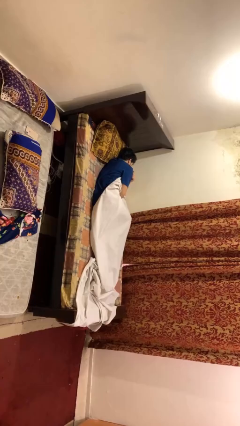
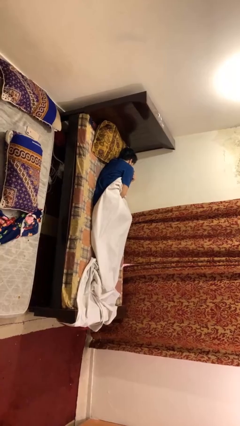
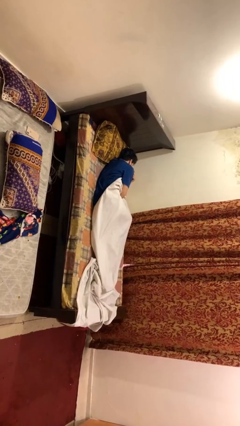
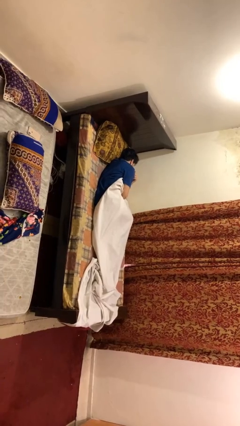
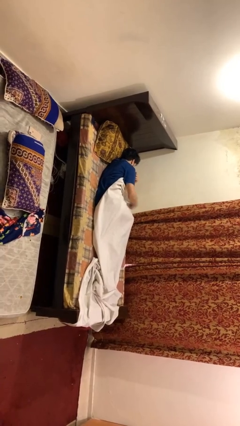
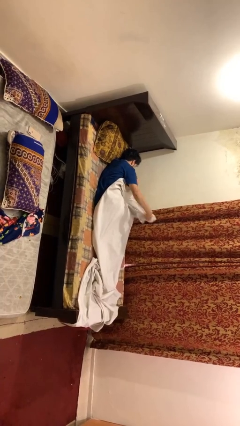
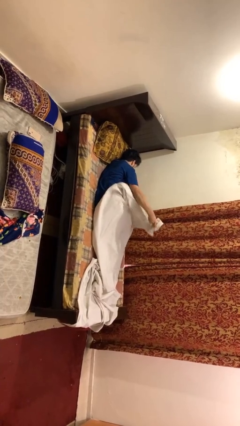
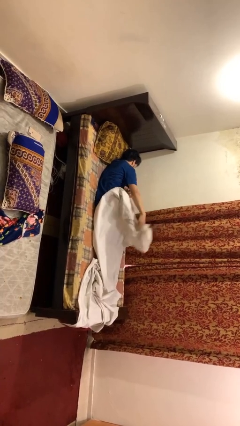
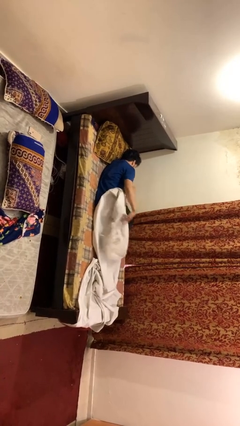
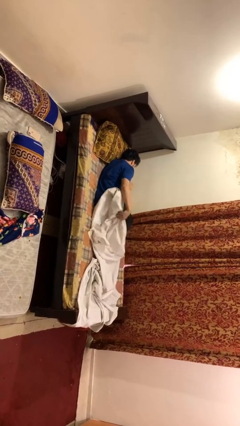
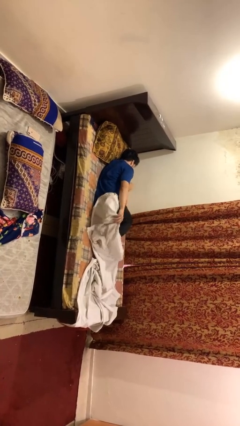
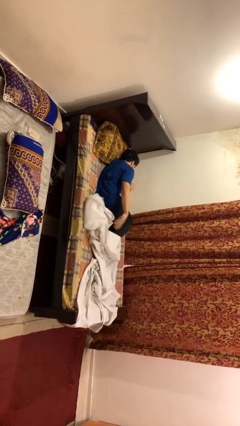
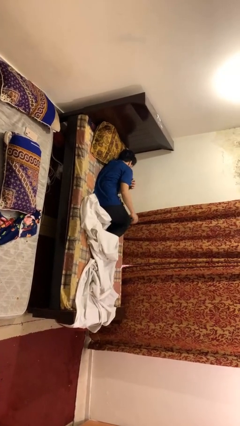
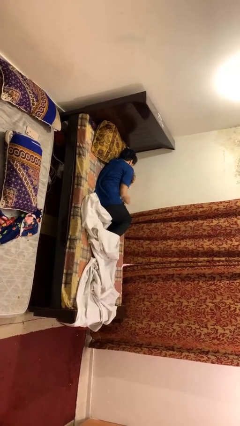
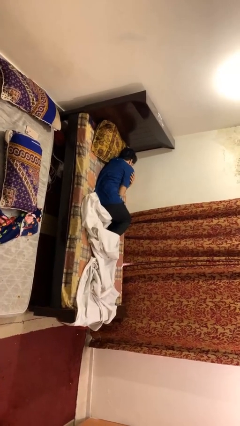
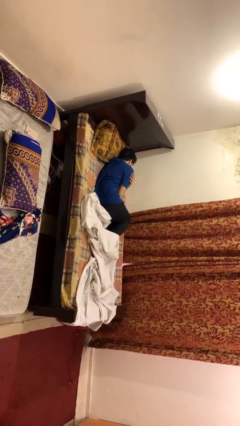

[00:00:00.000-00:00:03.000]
person uncovers with bedsheets

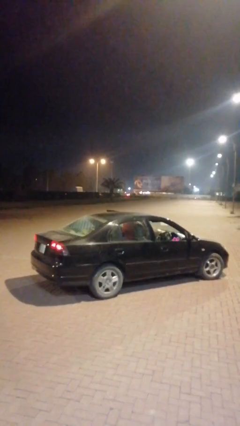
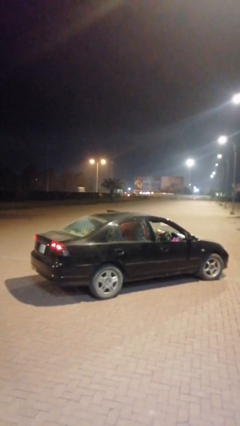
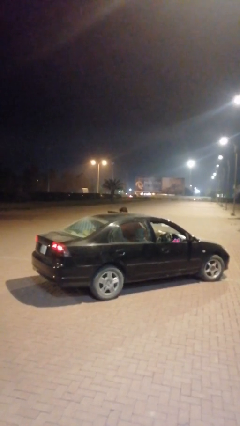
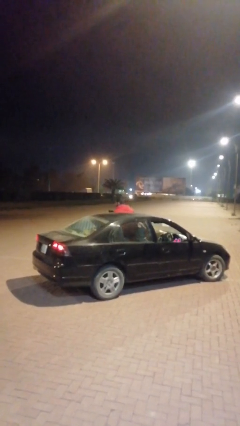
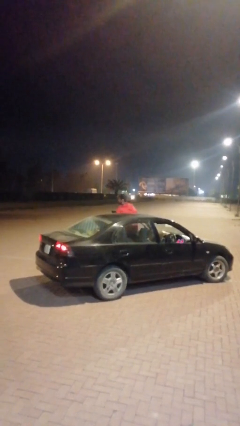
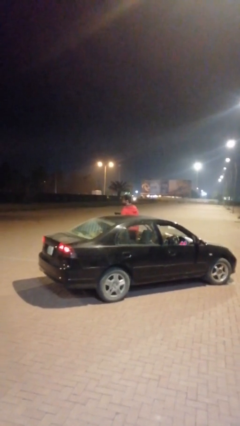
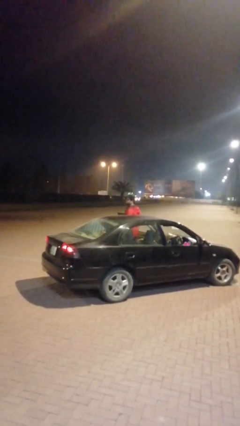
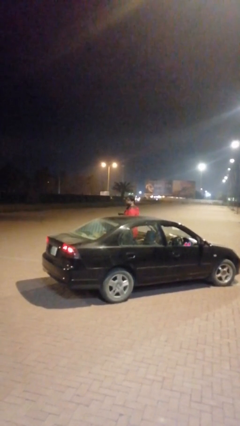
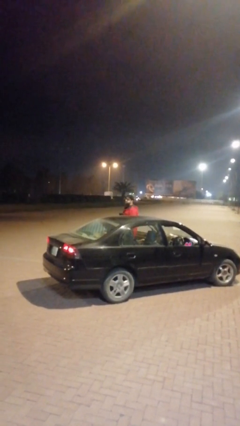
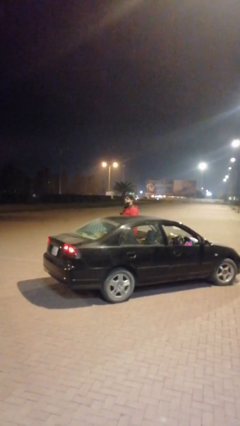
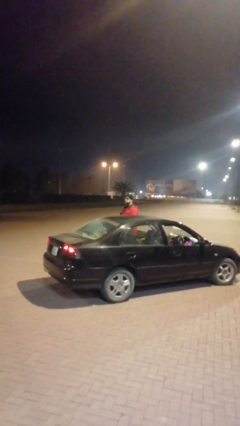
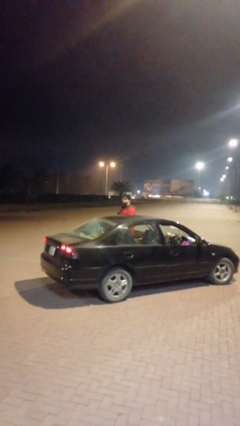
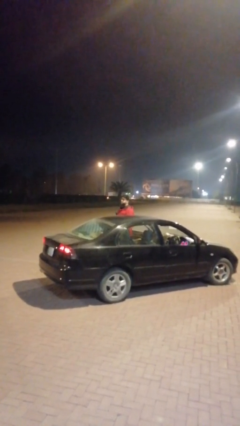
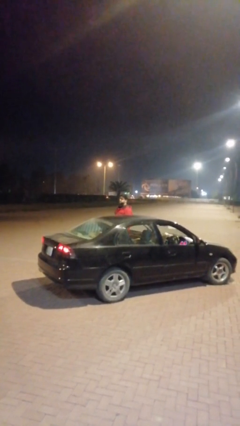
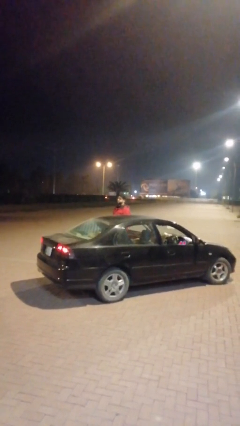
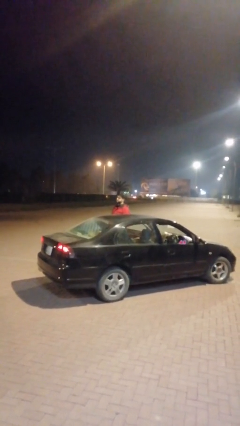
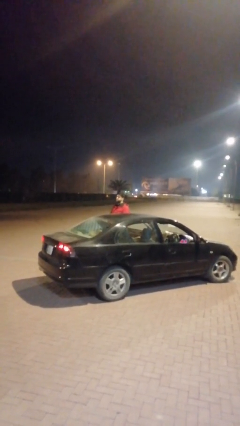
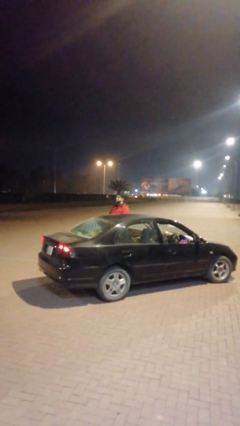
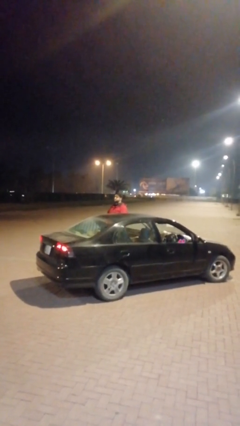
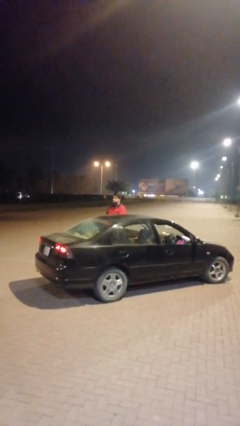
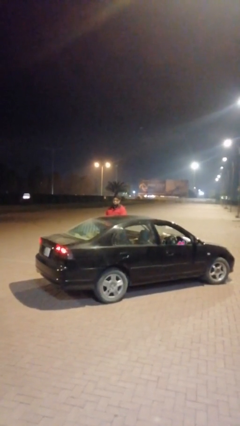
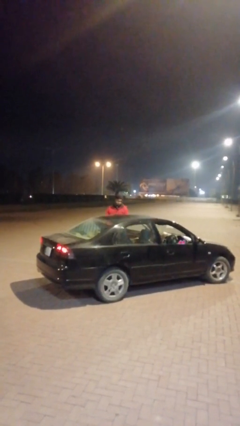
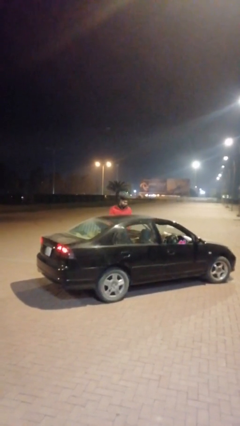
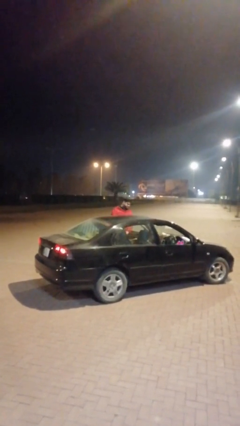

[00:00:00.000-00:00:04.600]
person exits car

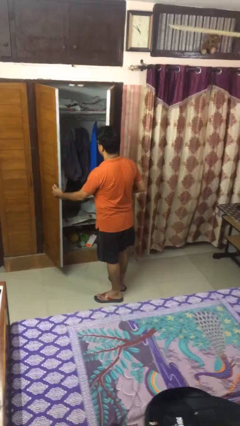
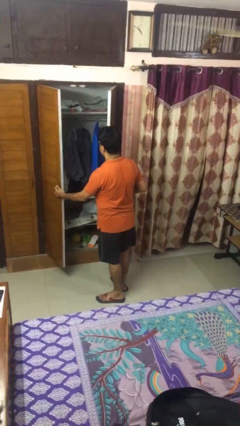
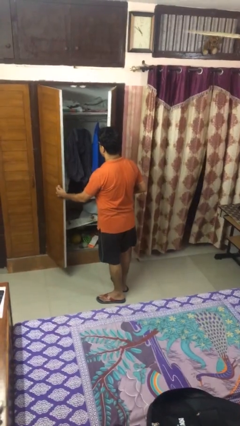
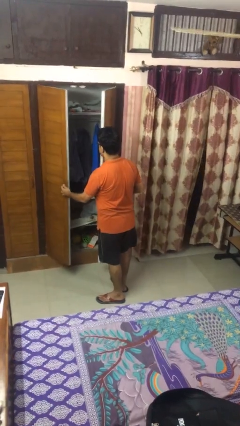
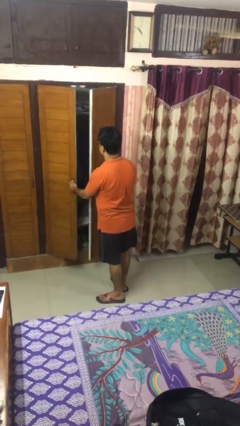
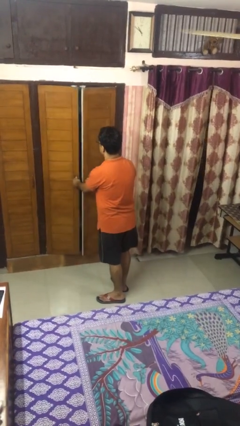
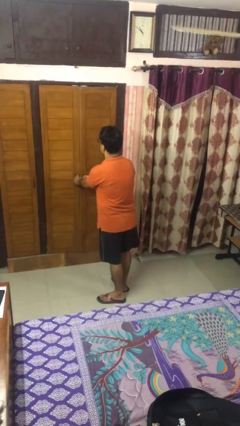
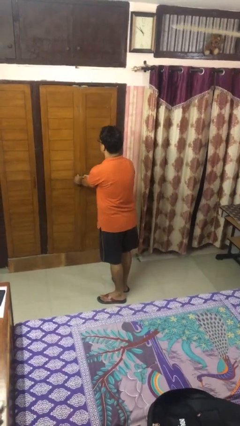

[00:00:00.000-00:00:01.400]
person closes closet door

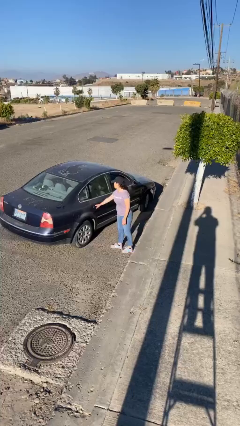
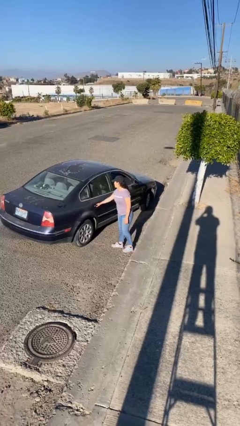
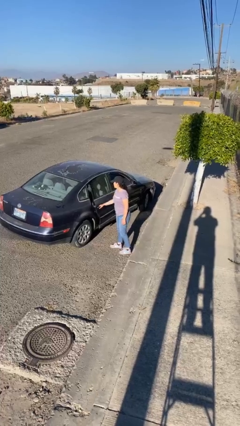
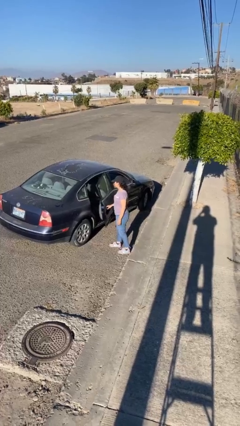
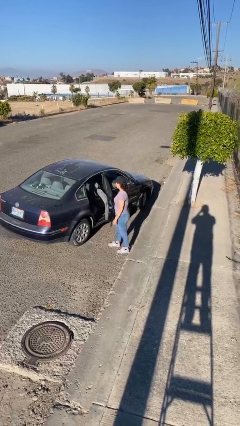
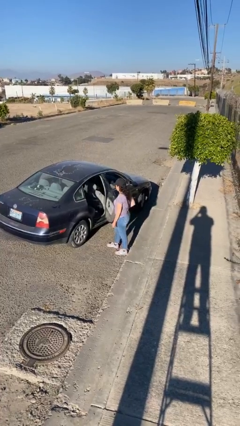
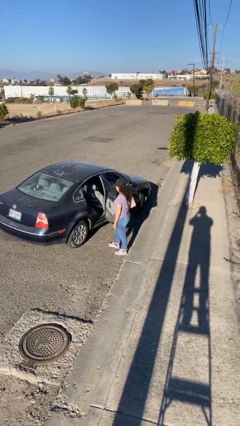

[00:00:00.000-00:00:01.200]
person opens car door

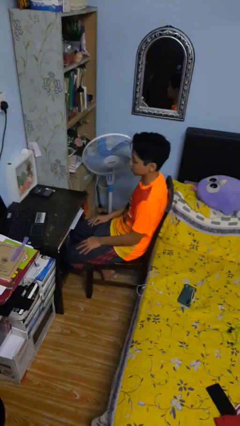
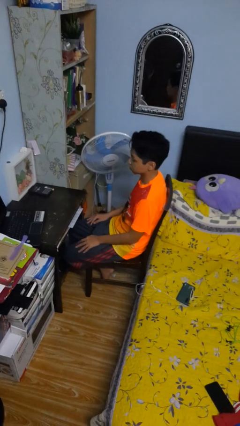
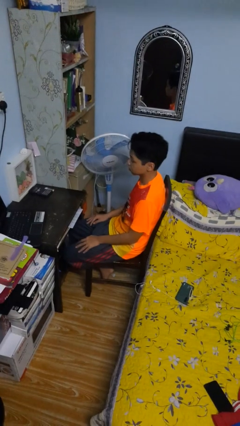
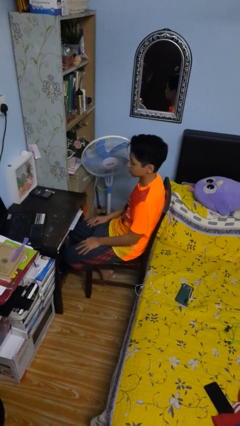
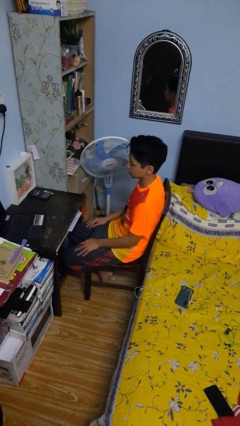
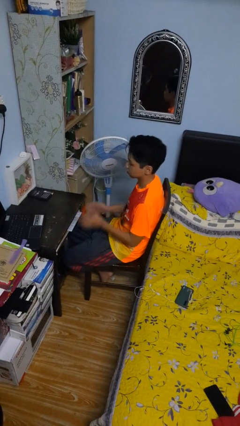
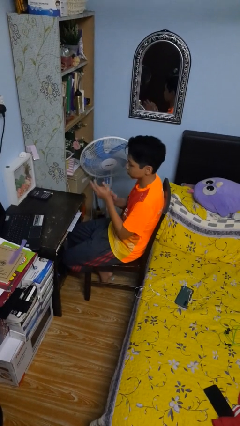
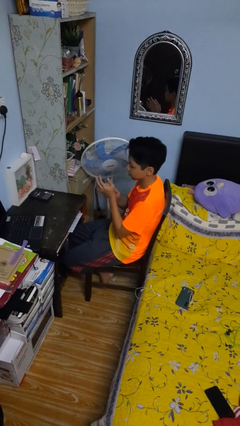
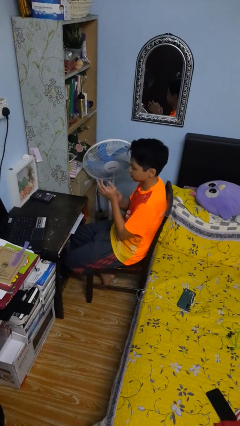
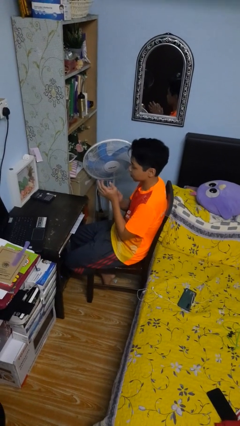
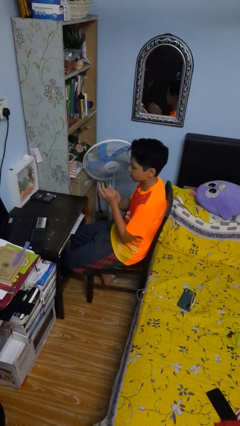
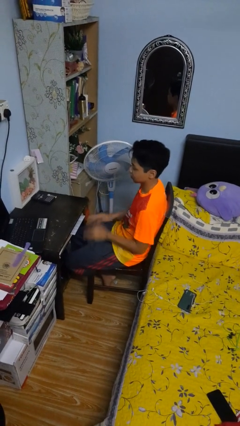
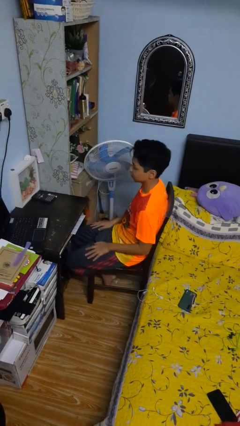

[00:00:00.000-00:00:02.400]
person claps hands

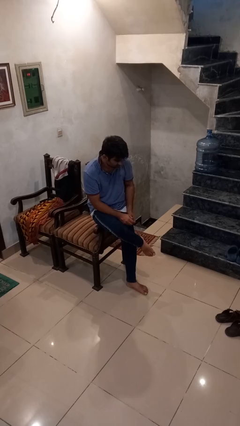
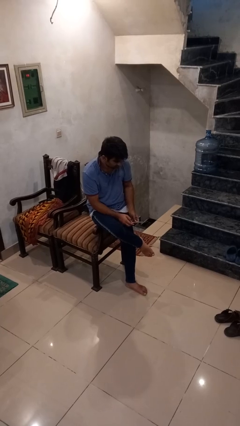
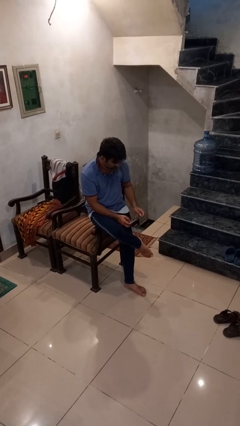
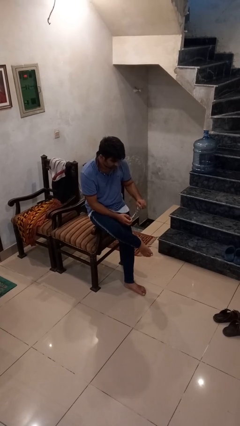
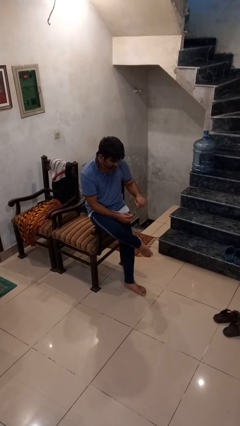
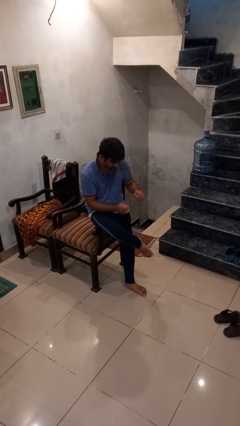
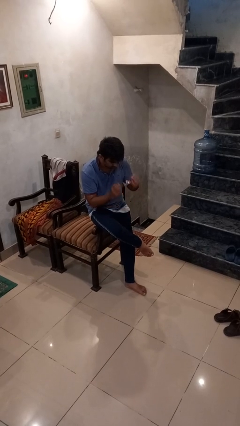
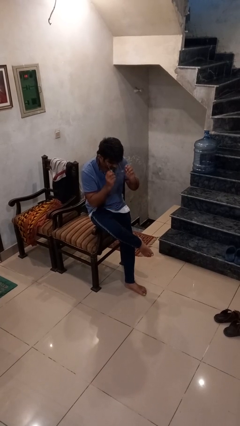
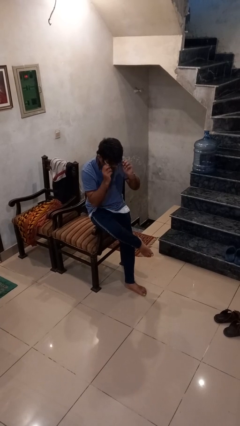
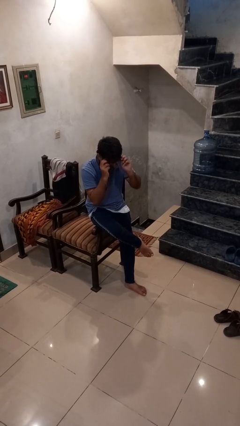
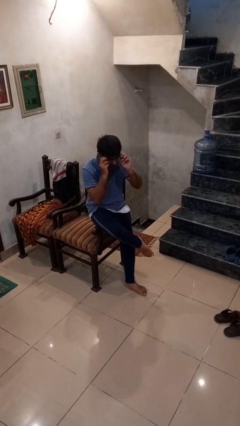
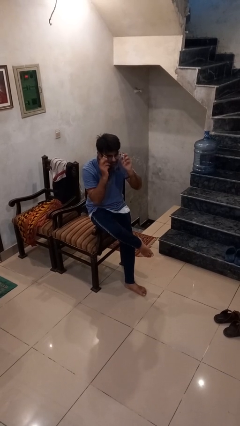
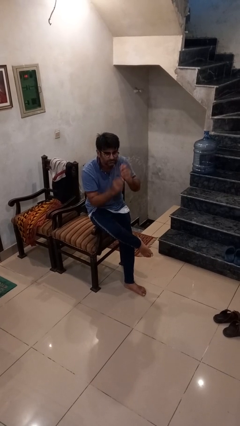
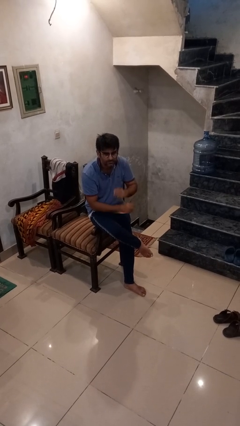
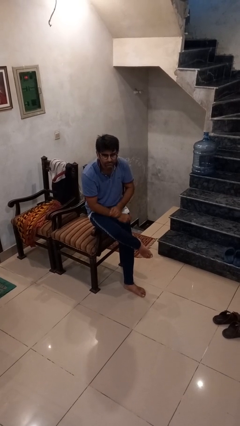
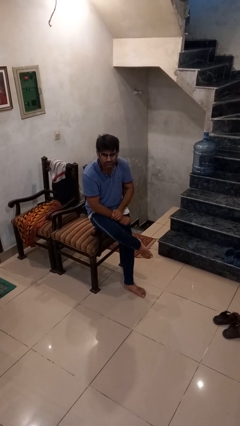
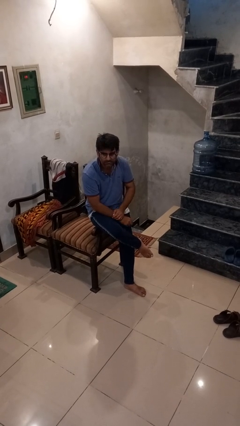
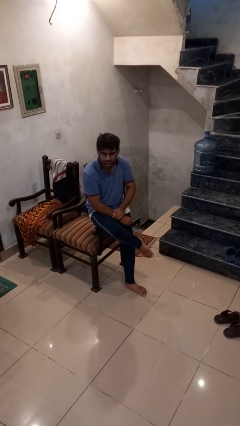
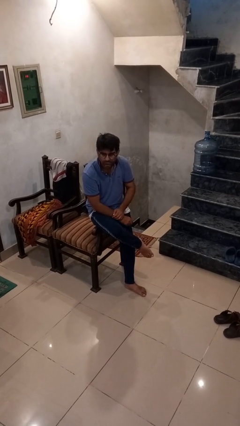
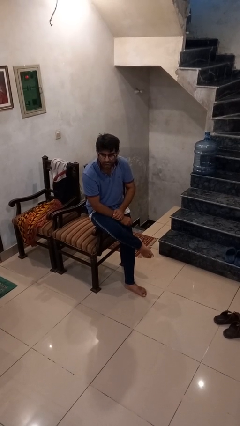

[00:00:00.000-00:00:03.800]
person puts on glasses

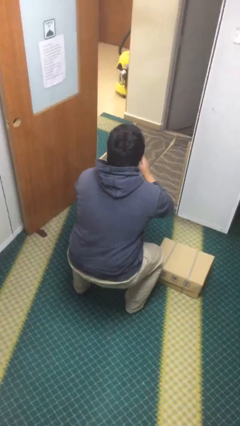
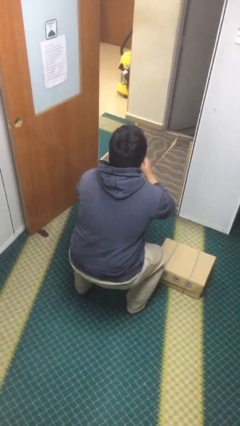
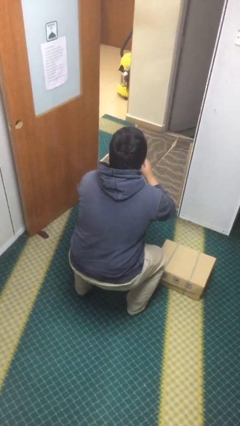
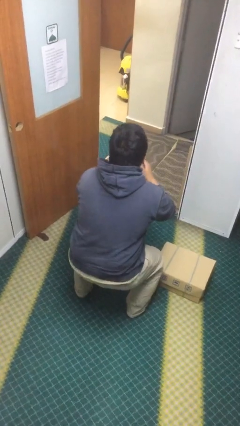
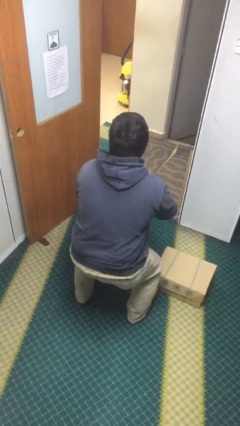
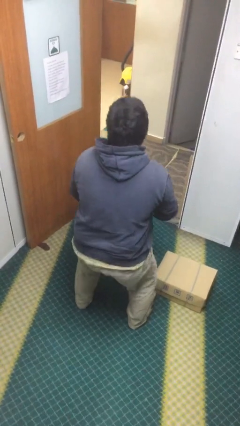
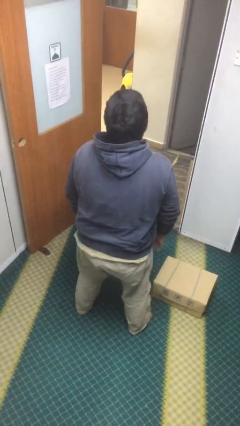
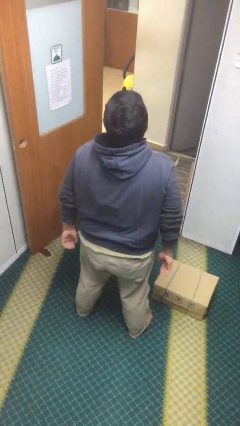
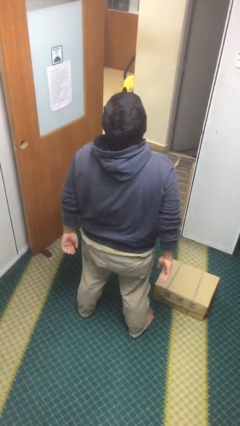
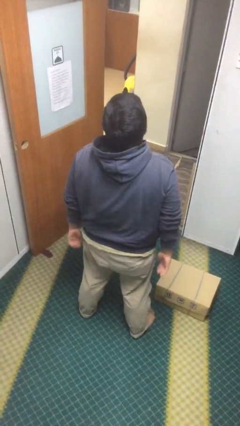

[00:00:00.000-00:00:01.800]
person stands up
